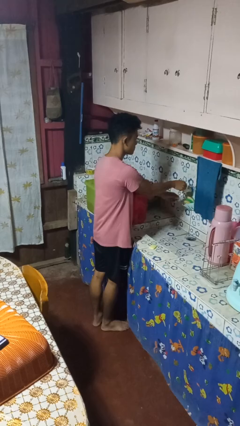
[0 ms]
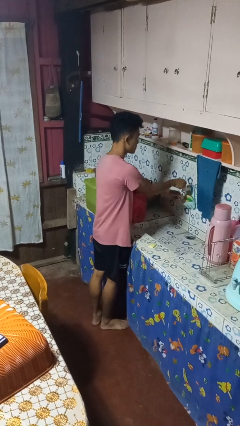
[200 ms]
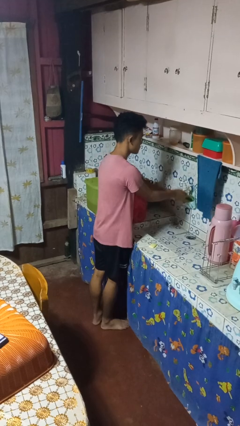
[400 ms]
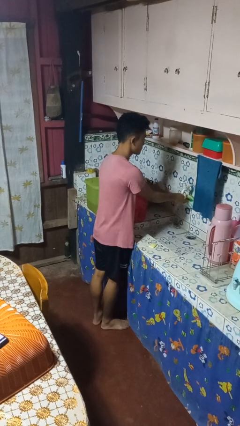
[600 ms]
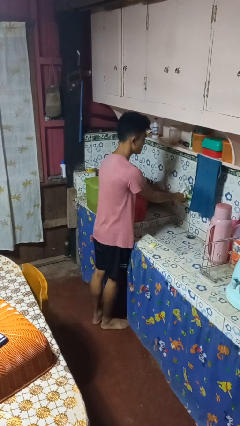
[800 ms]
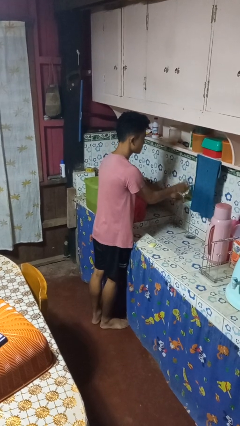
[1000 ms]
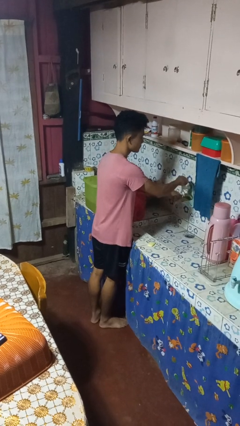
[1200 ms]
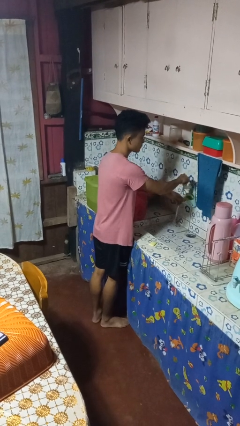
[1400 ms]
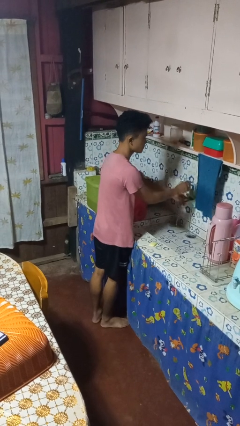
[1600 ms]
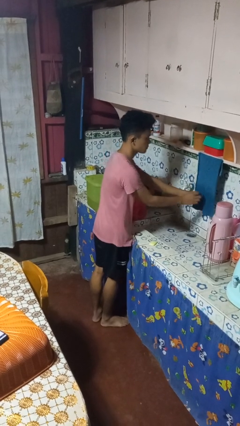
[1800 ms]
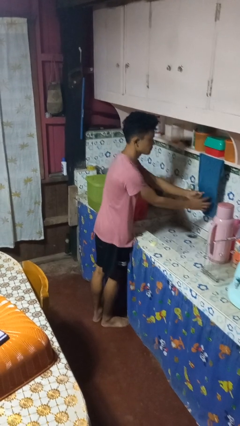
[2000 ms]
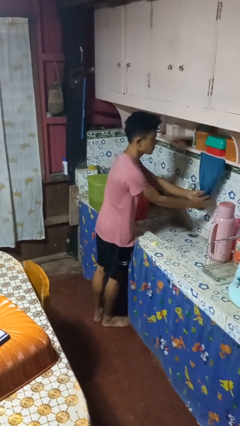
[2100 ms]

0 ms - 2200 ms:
person washes hands

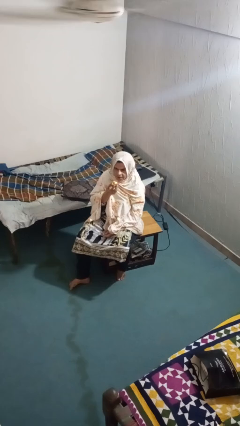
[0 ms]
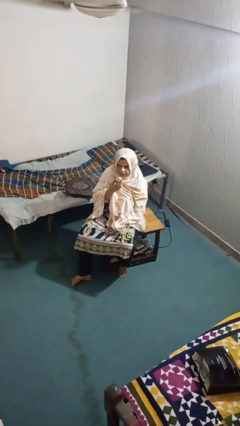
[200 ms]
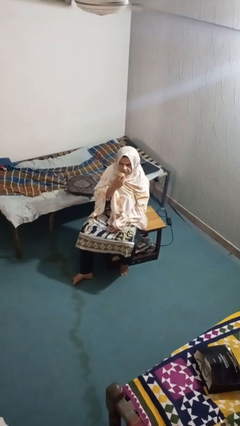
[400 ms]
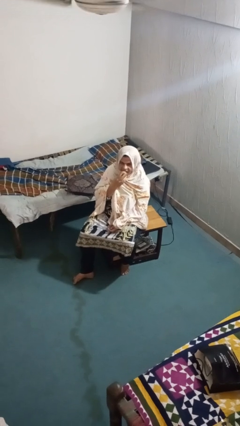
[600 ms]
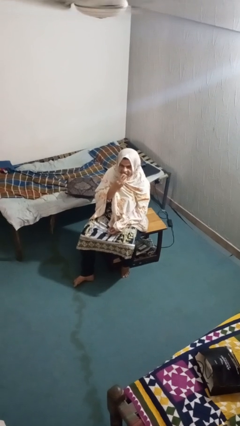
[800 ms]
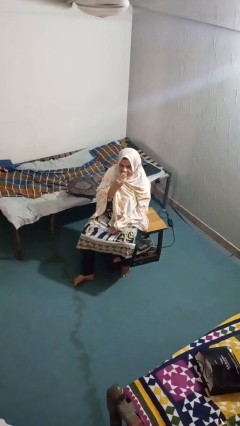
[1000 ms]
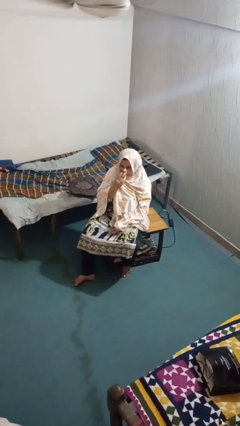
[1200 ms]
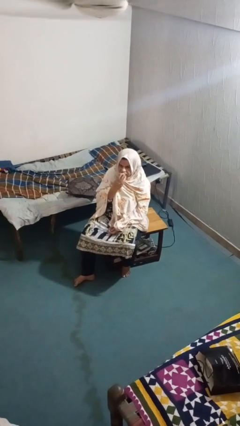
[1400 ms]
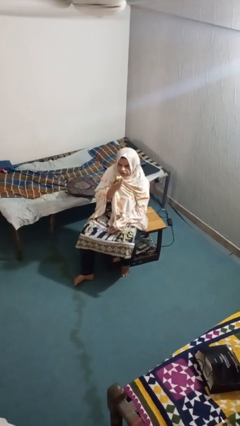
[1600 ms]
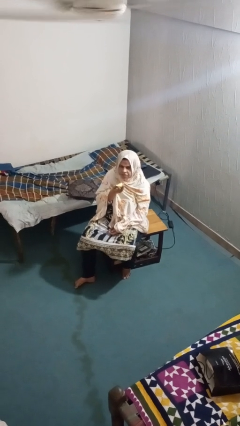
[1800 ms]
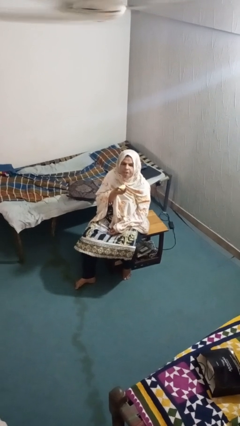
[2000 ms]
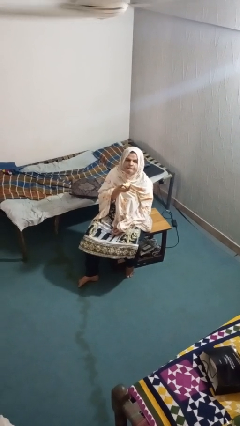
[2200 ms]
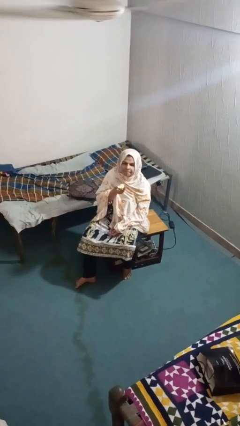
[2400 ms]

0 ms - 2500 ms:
person eats apple

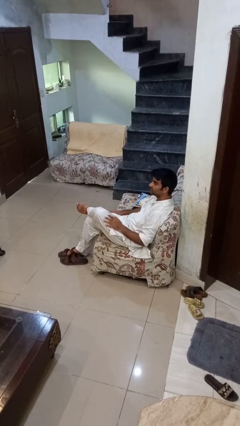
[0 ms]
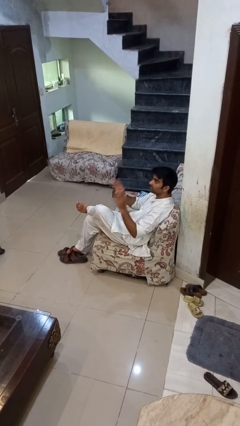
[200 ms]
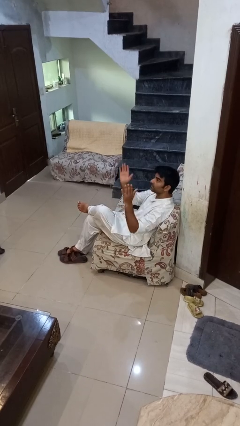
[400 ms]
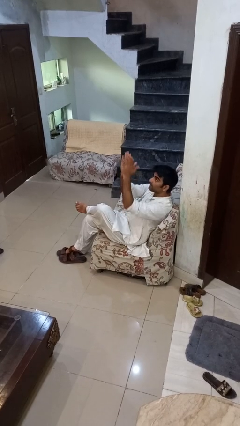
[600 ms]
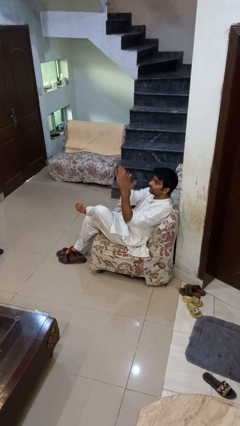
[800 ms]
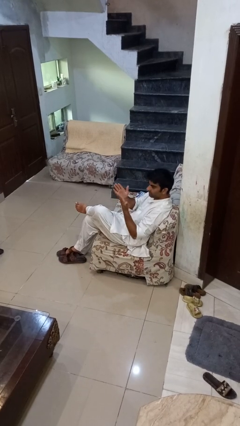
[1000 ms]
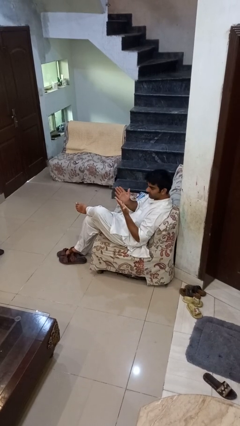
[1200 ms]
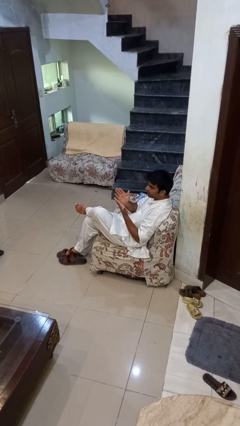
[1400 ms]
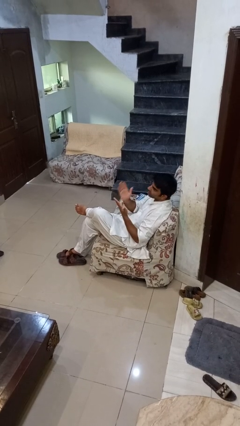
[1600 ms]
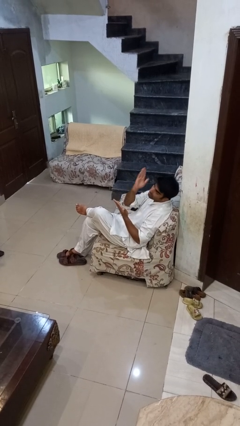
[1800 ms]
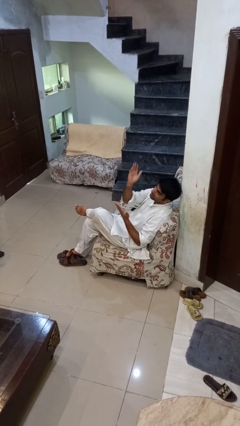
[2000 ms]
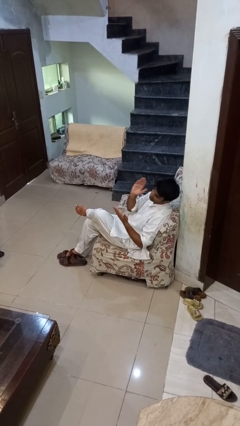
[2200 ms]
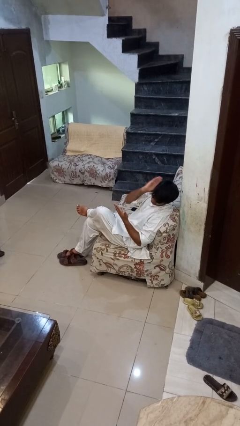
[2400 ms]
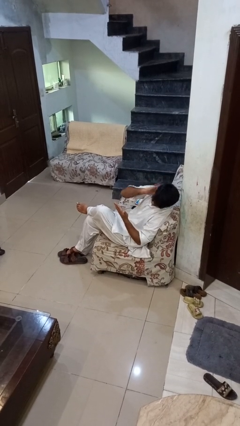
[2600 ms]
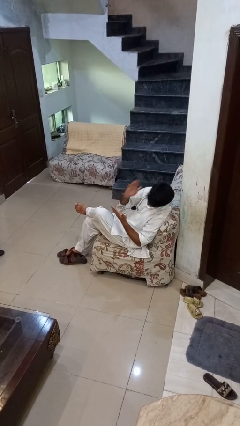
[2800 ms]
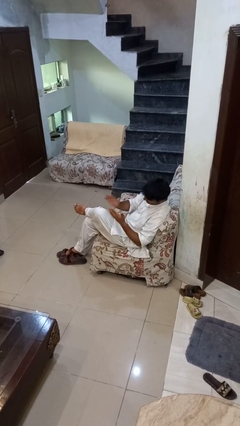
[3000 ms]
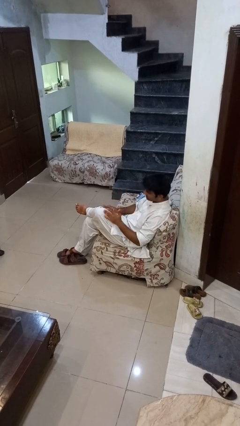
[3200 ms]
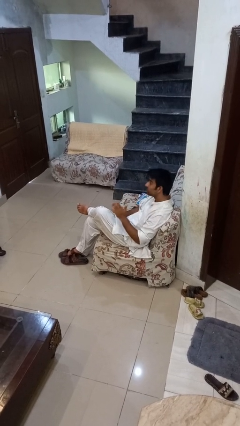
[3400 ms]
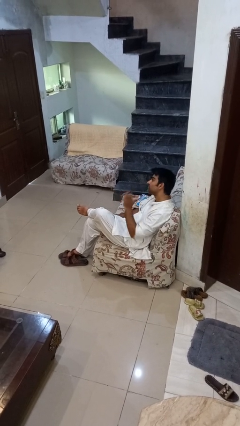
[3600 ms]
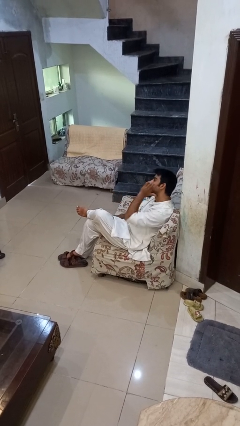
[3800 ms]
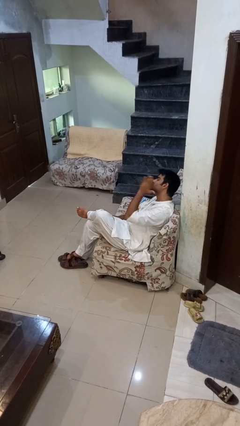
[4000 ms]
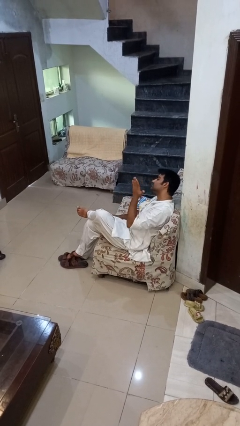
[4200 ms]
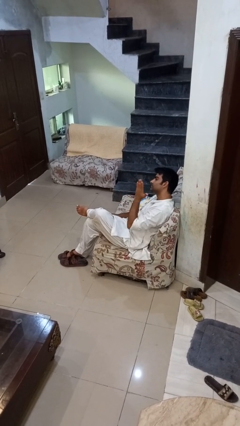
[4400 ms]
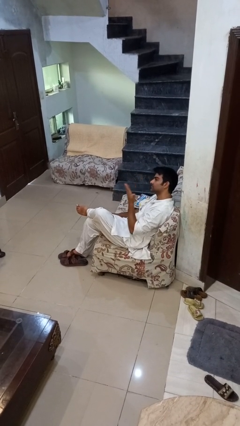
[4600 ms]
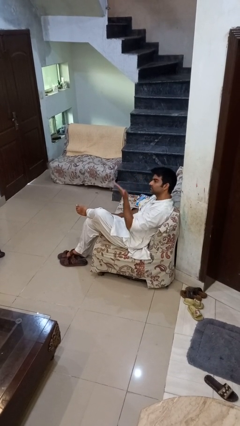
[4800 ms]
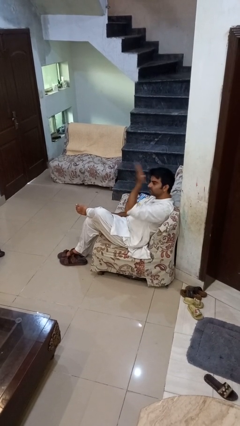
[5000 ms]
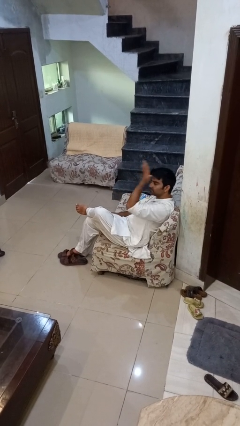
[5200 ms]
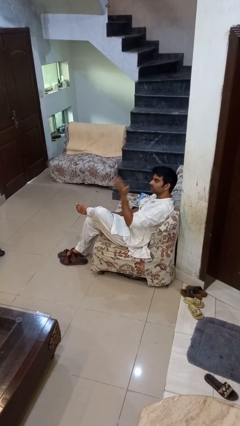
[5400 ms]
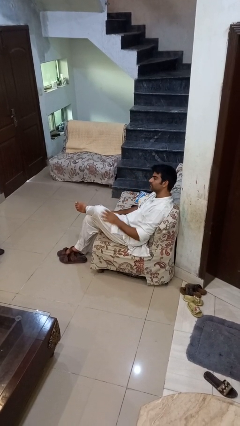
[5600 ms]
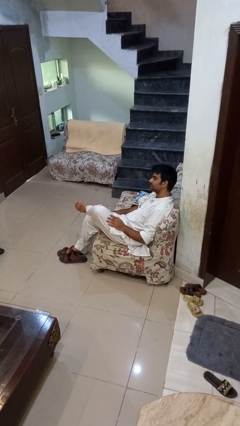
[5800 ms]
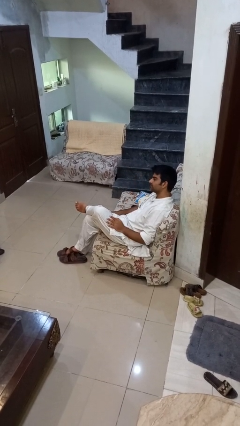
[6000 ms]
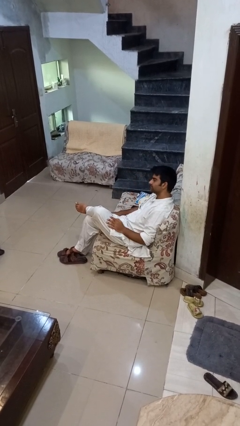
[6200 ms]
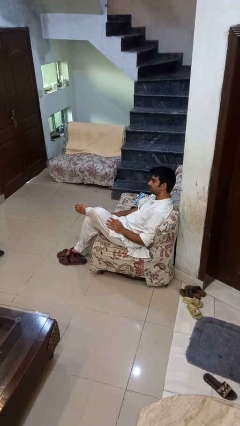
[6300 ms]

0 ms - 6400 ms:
person swats bug

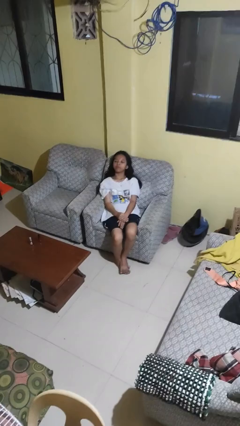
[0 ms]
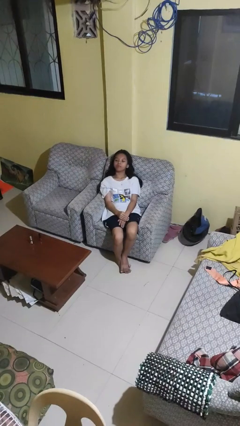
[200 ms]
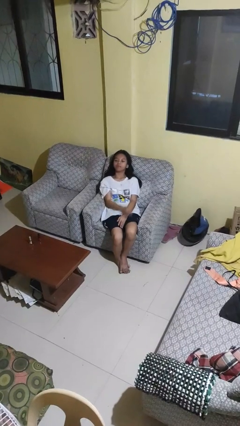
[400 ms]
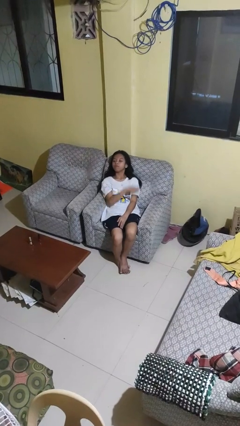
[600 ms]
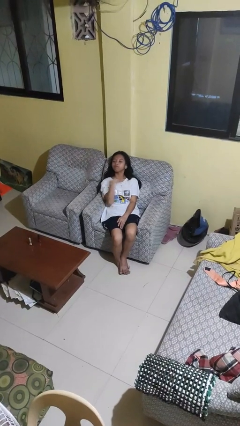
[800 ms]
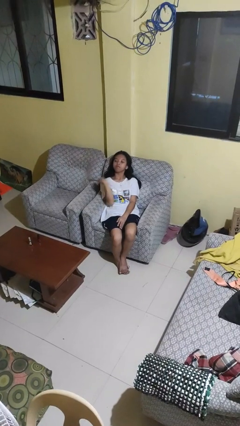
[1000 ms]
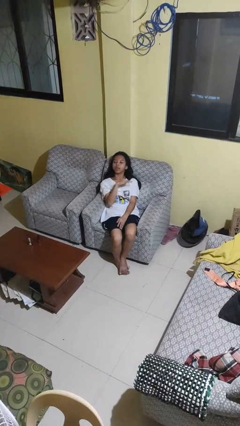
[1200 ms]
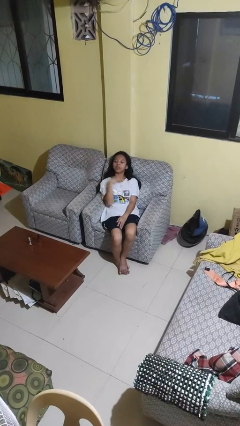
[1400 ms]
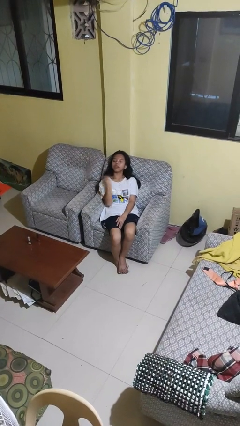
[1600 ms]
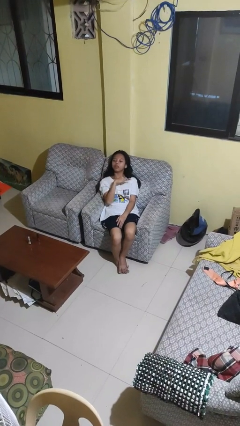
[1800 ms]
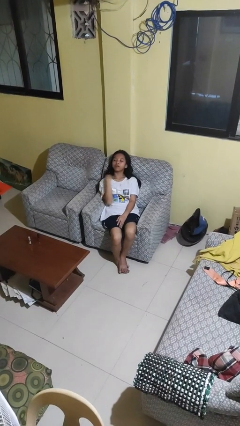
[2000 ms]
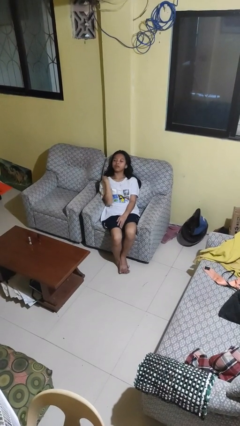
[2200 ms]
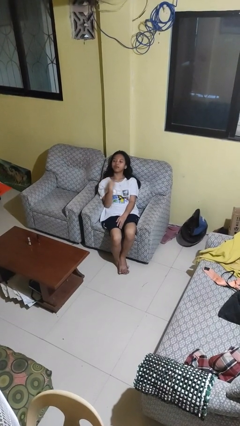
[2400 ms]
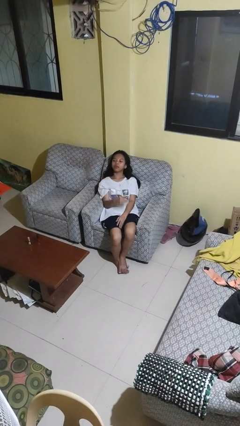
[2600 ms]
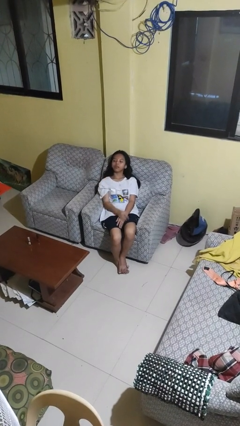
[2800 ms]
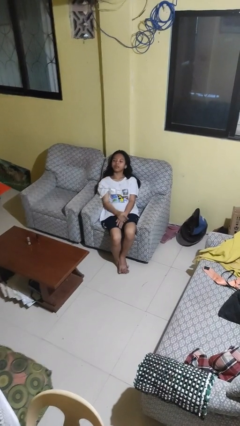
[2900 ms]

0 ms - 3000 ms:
person gestures cut

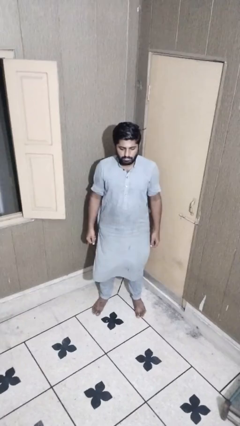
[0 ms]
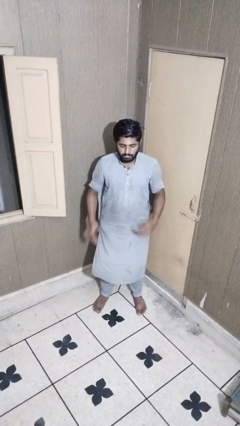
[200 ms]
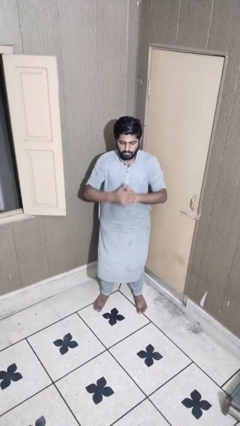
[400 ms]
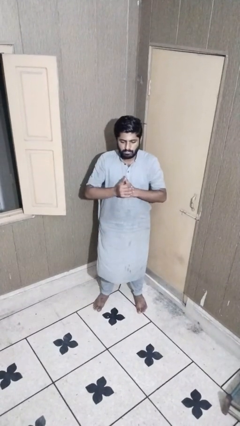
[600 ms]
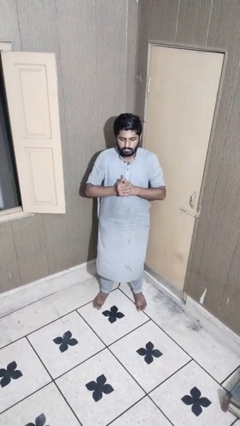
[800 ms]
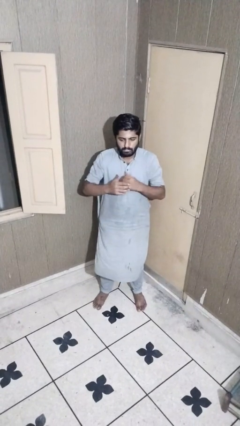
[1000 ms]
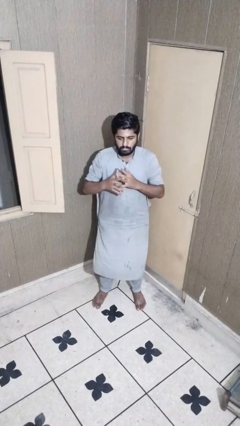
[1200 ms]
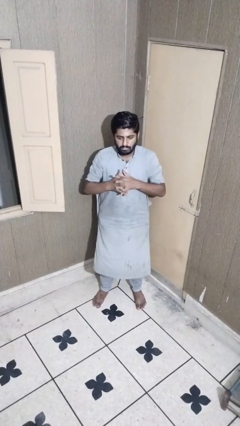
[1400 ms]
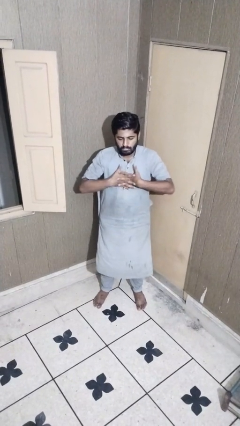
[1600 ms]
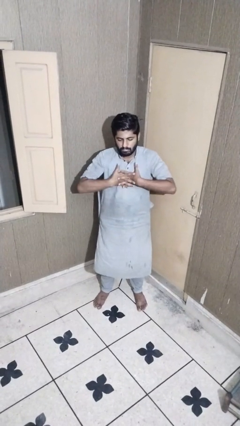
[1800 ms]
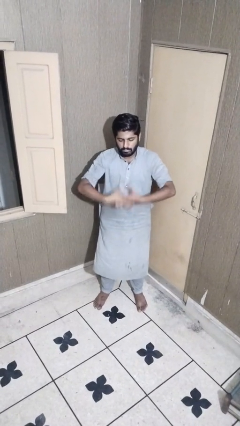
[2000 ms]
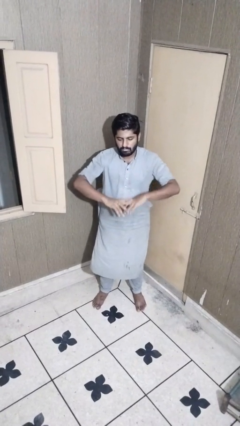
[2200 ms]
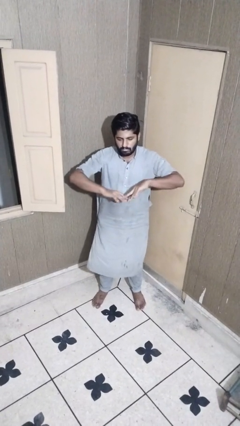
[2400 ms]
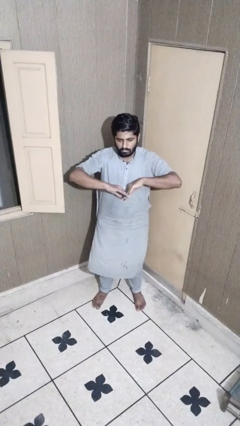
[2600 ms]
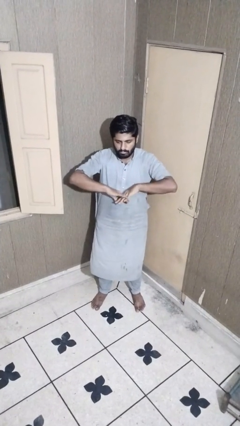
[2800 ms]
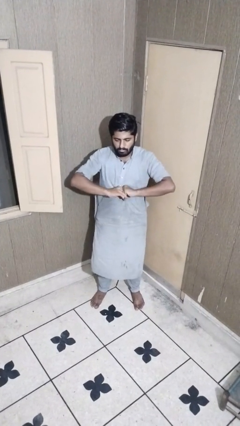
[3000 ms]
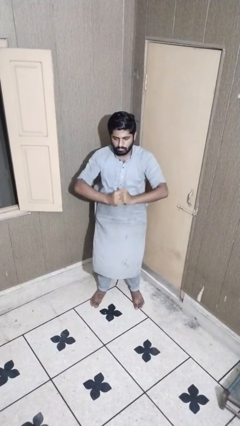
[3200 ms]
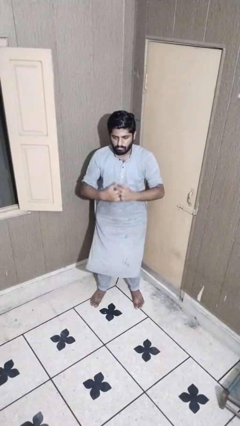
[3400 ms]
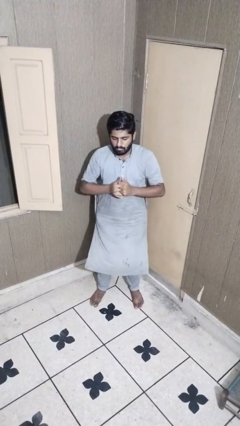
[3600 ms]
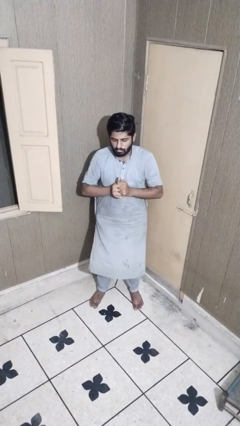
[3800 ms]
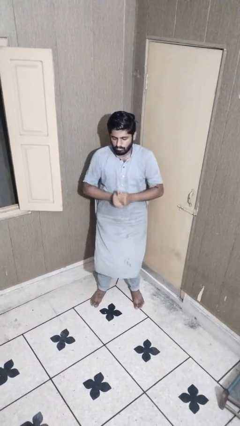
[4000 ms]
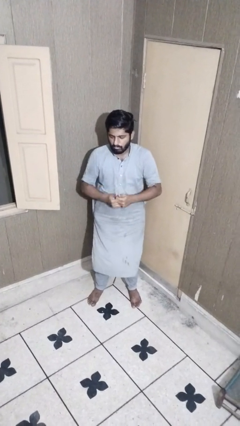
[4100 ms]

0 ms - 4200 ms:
person cracks knuckles
